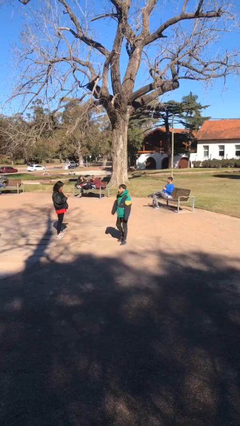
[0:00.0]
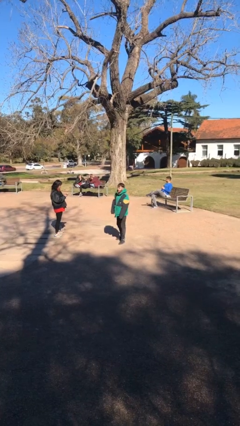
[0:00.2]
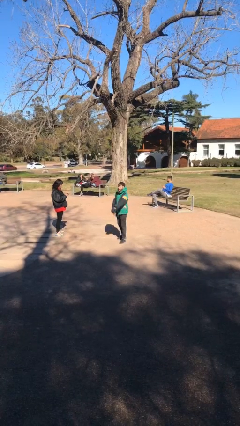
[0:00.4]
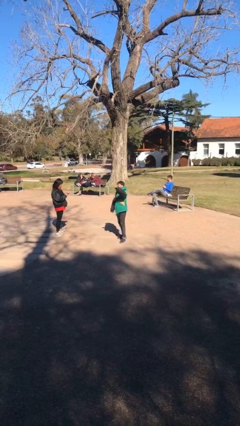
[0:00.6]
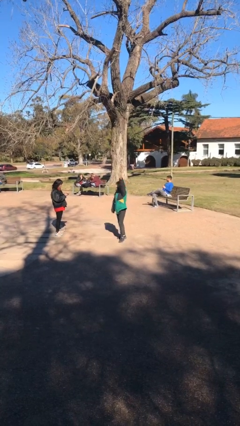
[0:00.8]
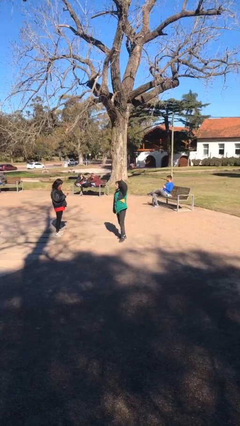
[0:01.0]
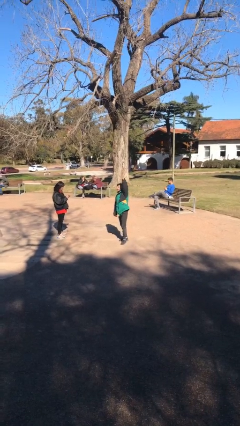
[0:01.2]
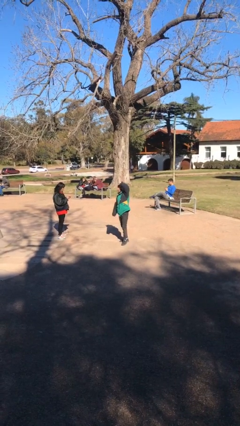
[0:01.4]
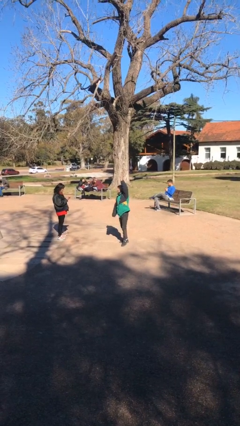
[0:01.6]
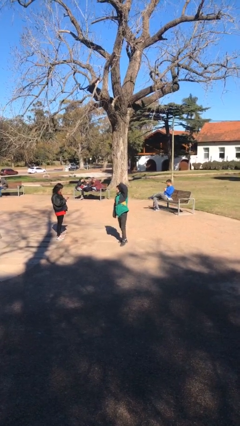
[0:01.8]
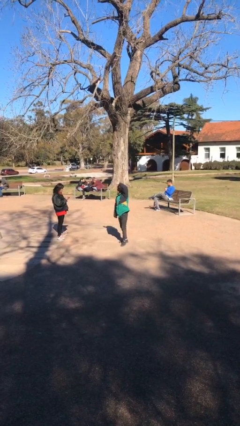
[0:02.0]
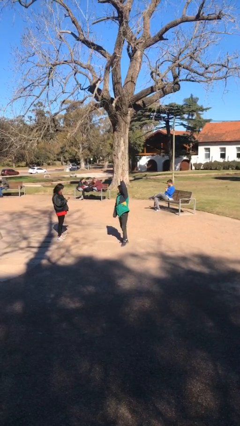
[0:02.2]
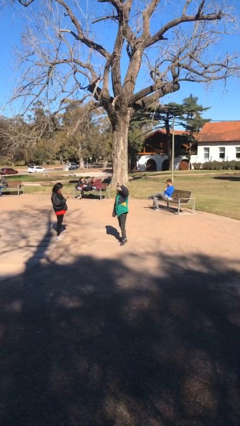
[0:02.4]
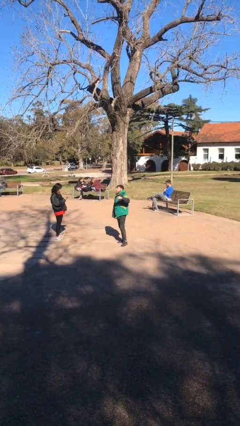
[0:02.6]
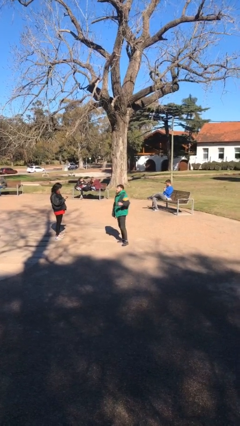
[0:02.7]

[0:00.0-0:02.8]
person waves at person

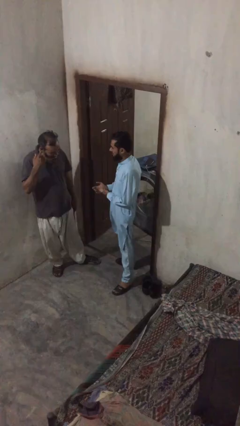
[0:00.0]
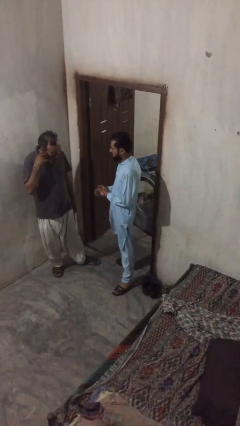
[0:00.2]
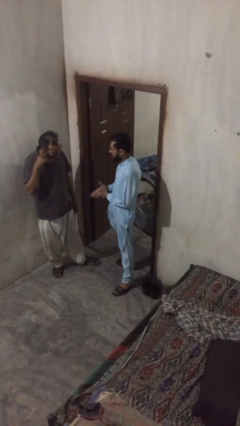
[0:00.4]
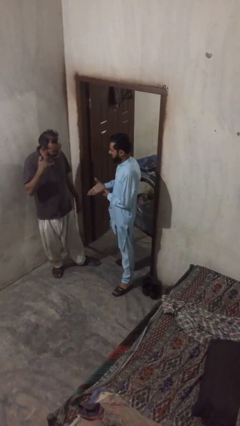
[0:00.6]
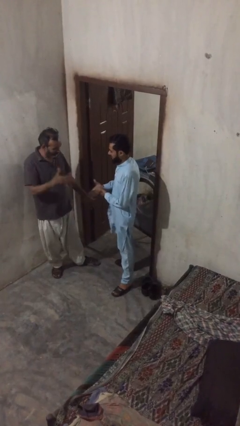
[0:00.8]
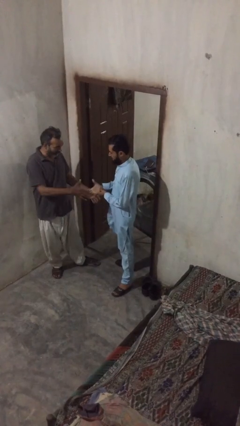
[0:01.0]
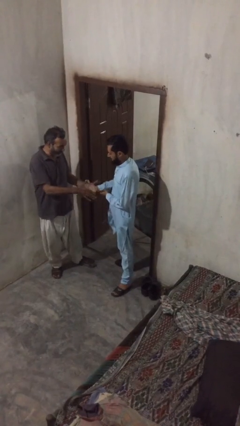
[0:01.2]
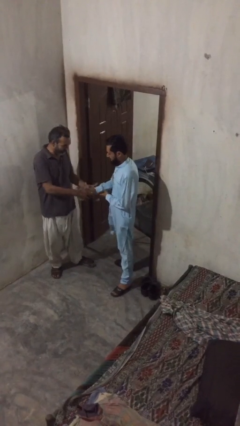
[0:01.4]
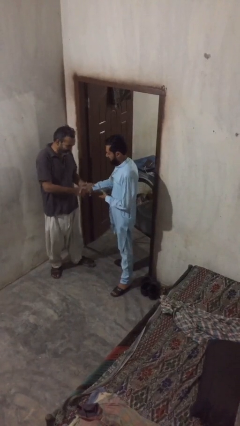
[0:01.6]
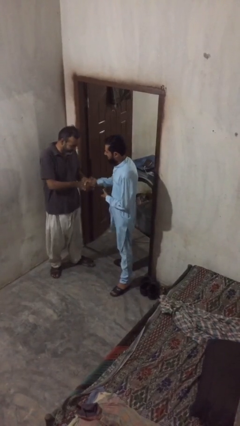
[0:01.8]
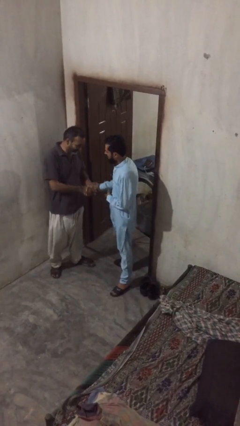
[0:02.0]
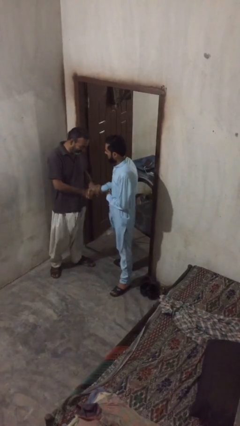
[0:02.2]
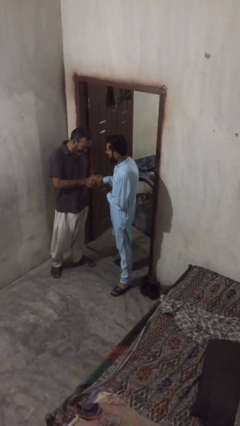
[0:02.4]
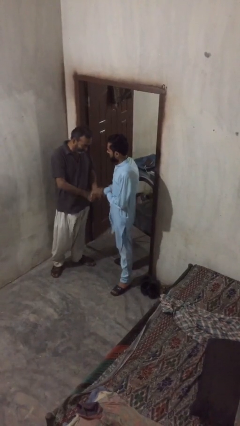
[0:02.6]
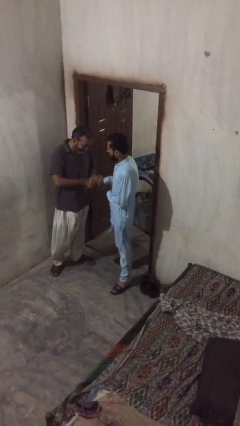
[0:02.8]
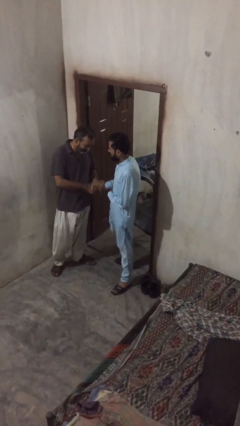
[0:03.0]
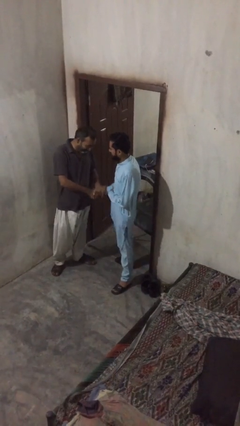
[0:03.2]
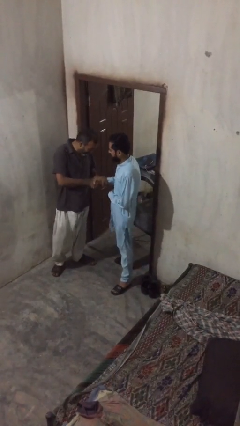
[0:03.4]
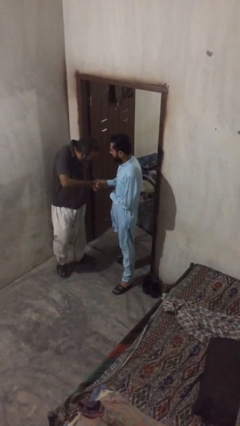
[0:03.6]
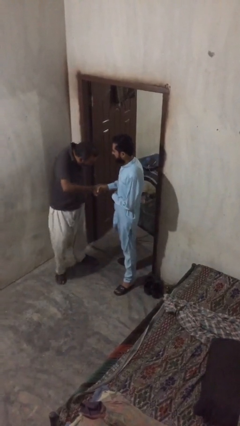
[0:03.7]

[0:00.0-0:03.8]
person shakes hand

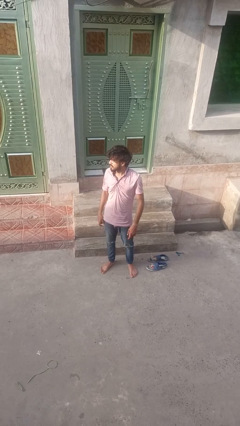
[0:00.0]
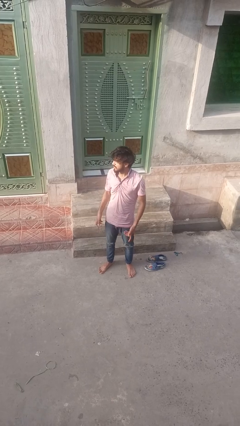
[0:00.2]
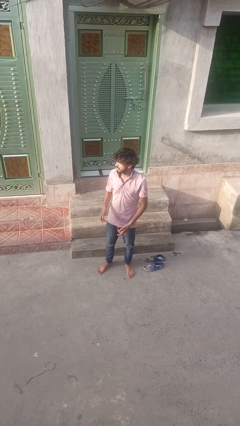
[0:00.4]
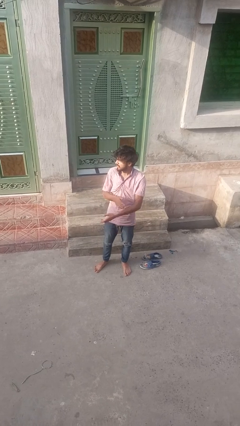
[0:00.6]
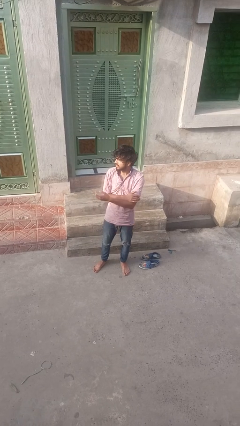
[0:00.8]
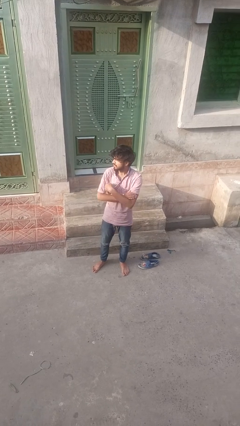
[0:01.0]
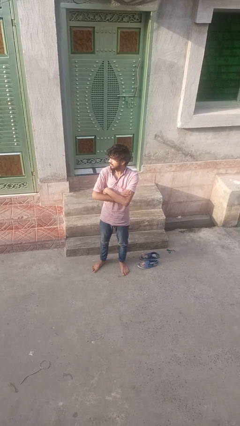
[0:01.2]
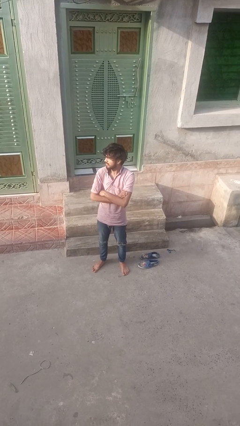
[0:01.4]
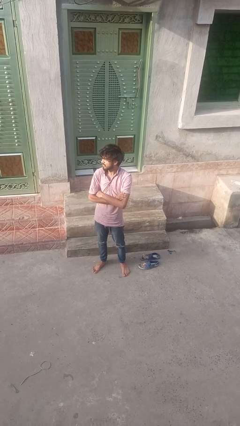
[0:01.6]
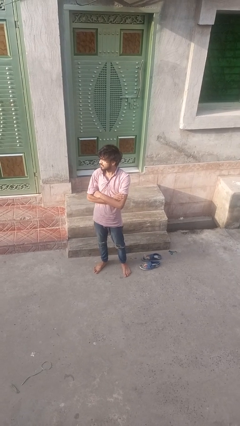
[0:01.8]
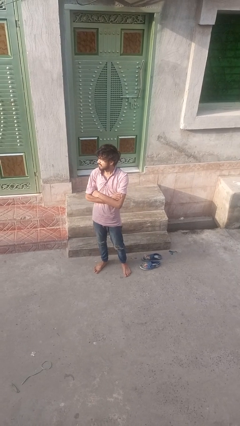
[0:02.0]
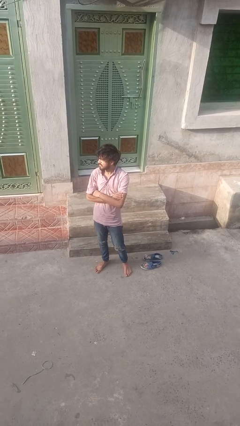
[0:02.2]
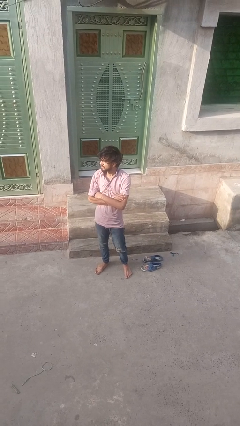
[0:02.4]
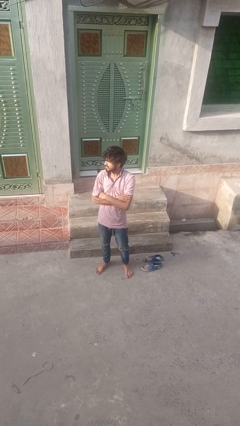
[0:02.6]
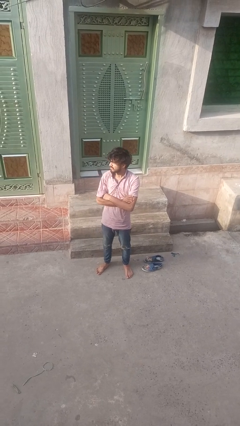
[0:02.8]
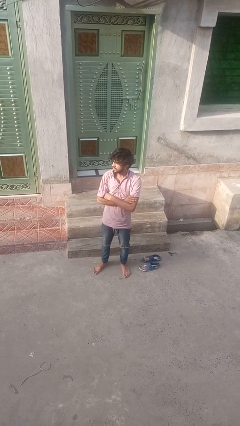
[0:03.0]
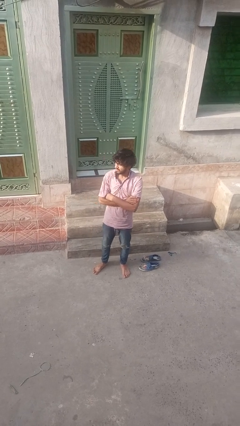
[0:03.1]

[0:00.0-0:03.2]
person crosses arms

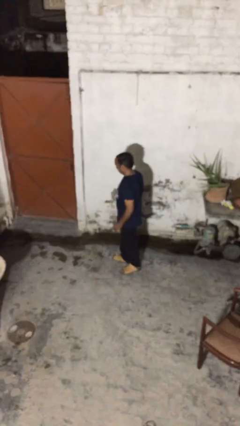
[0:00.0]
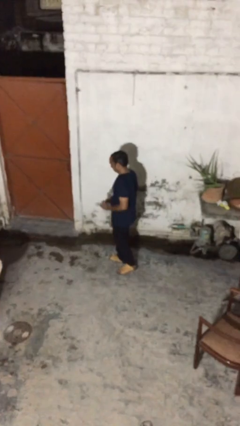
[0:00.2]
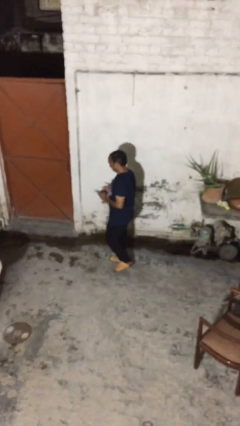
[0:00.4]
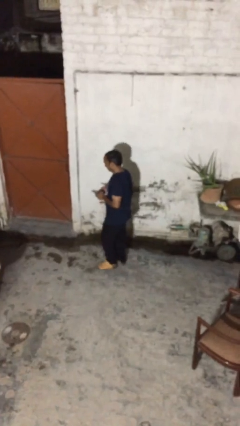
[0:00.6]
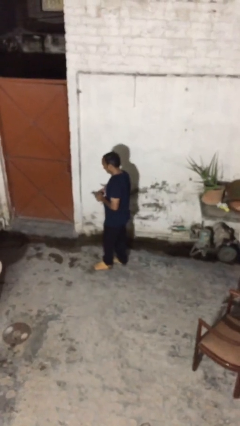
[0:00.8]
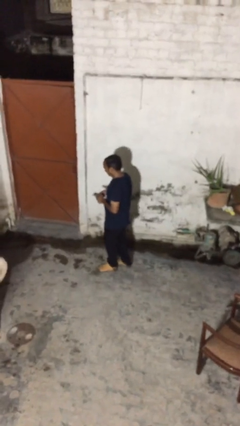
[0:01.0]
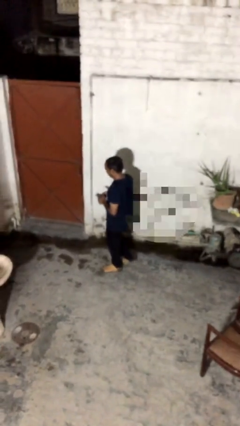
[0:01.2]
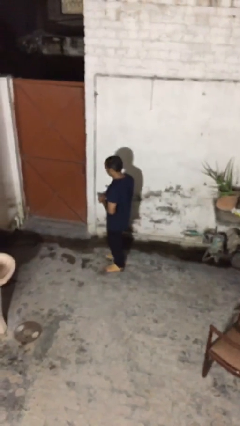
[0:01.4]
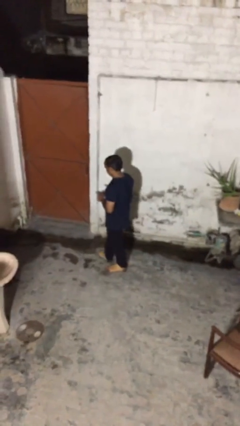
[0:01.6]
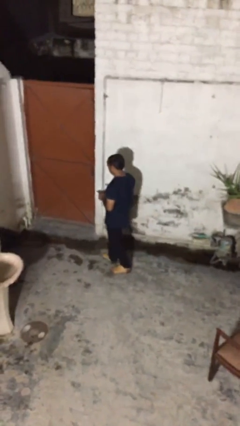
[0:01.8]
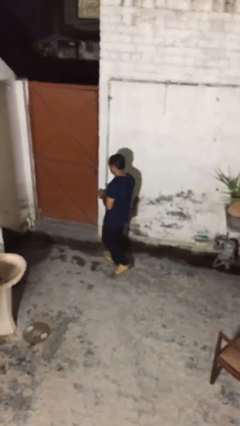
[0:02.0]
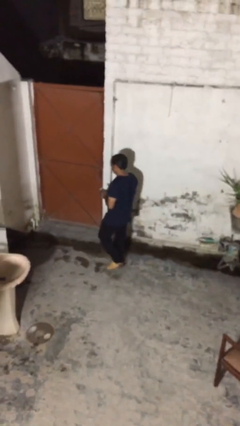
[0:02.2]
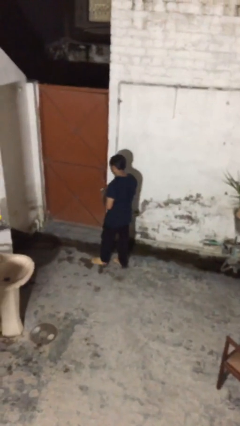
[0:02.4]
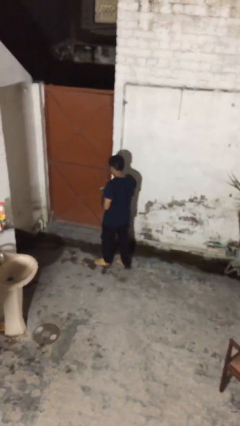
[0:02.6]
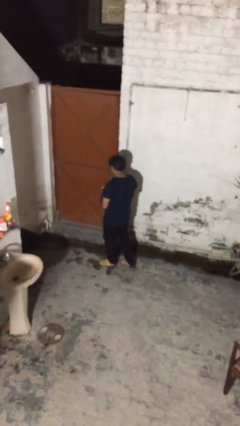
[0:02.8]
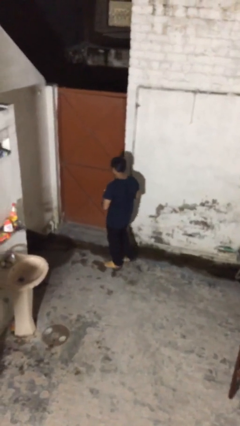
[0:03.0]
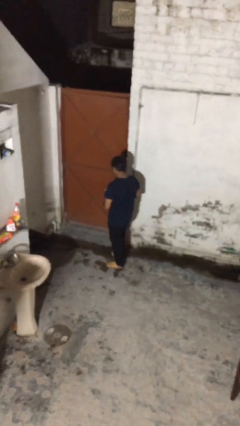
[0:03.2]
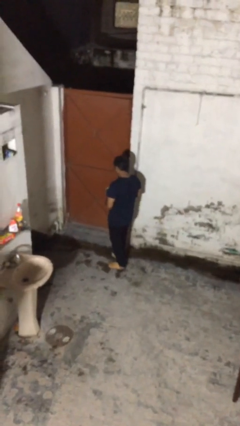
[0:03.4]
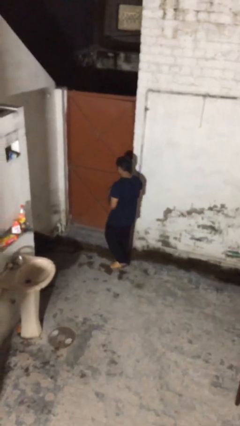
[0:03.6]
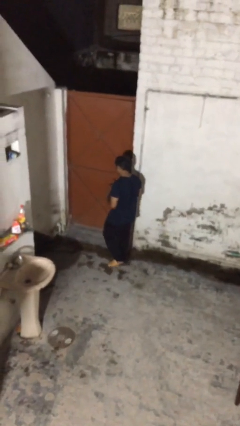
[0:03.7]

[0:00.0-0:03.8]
person texts on phone

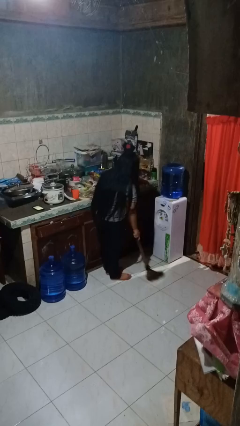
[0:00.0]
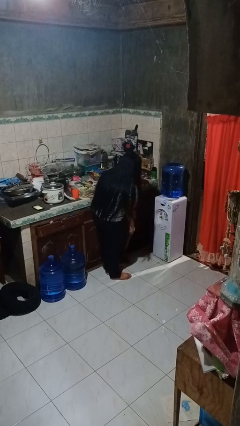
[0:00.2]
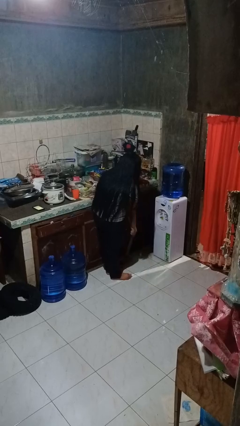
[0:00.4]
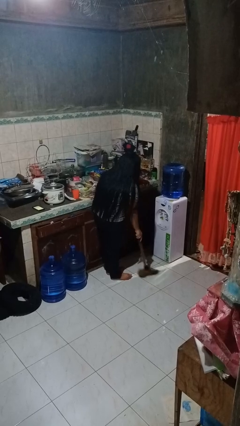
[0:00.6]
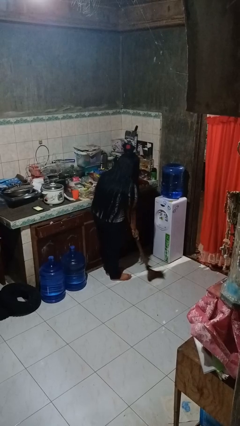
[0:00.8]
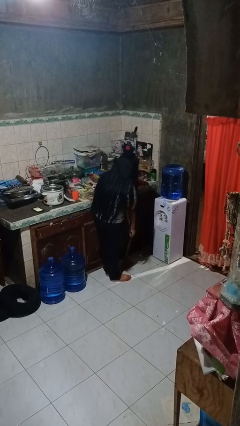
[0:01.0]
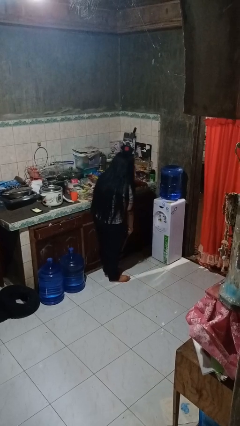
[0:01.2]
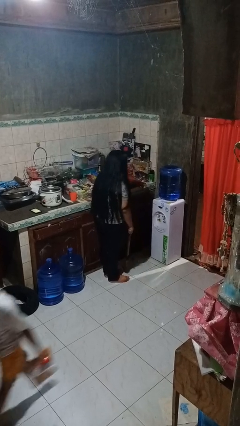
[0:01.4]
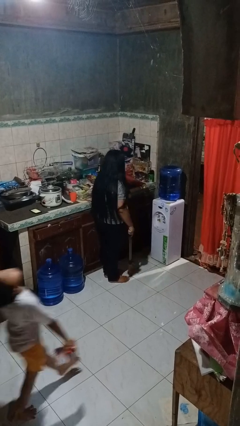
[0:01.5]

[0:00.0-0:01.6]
person sweeps floor

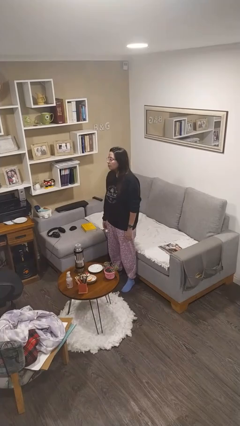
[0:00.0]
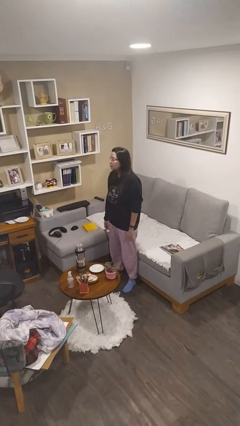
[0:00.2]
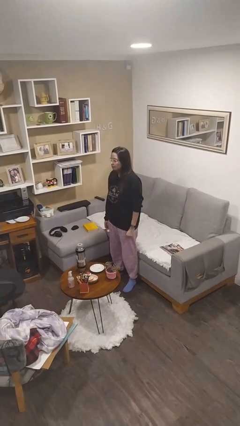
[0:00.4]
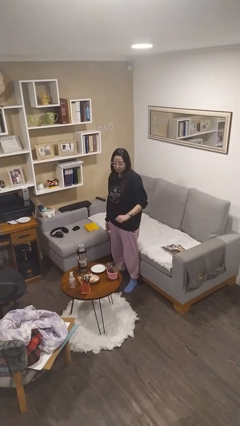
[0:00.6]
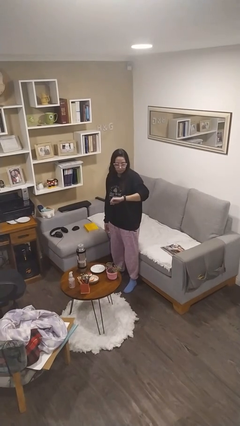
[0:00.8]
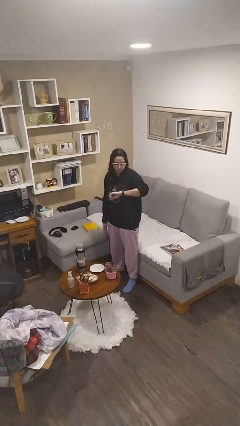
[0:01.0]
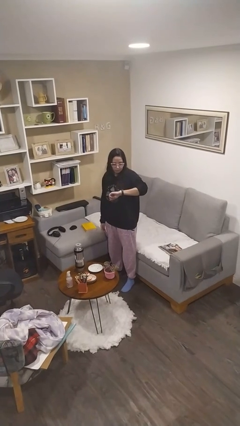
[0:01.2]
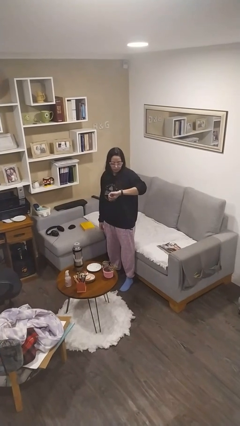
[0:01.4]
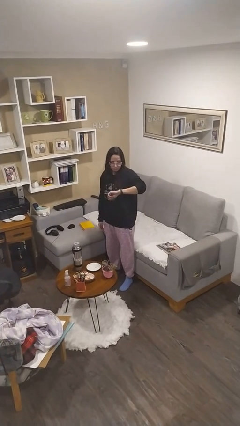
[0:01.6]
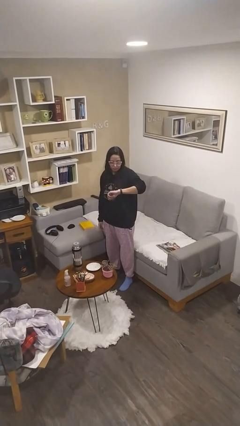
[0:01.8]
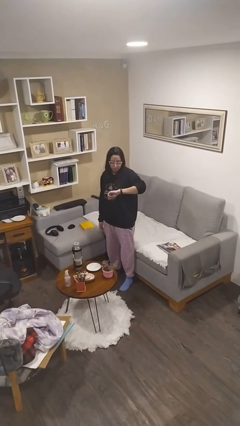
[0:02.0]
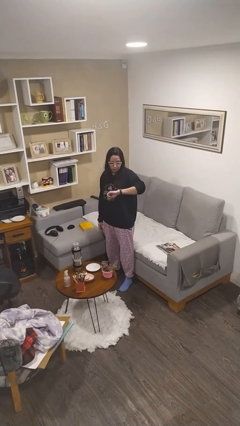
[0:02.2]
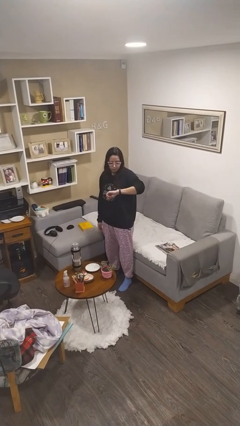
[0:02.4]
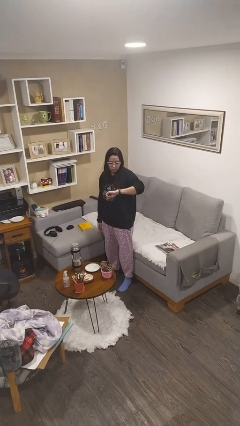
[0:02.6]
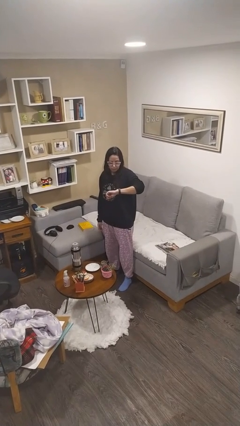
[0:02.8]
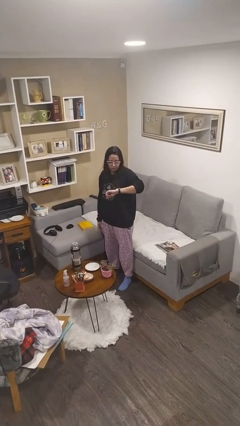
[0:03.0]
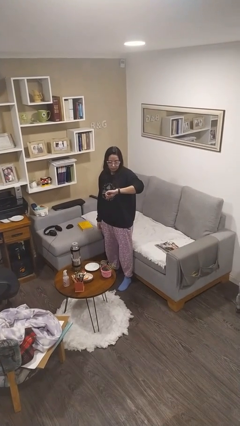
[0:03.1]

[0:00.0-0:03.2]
person looks at wristwatch
